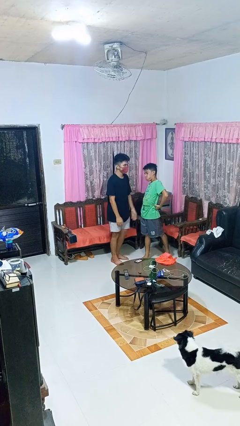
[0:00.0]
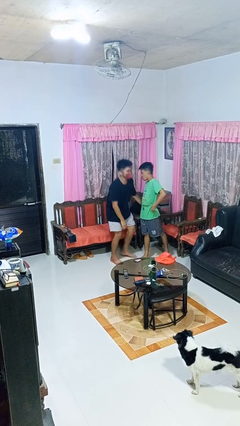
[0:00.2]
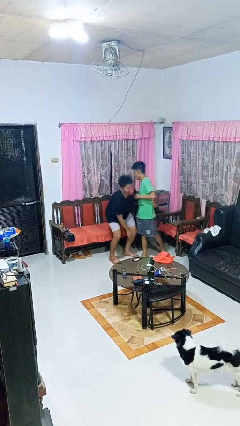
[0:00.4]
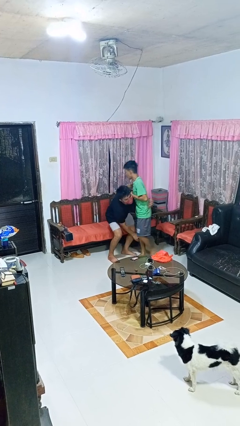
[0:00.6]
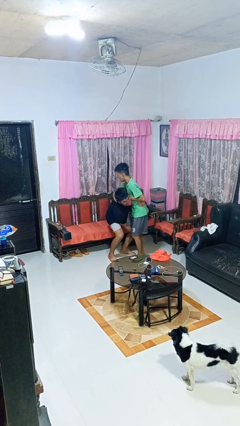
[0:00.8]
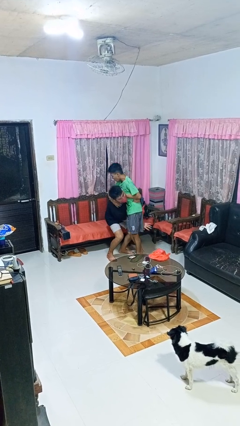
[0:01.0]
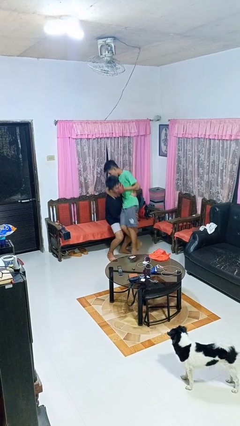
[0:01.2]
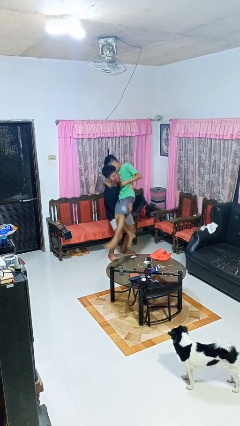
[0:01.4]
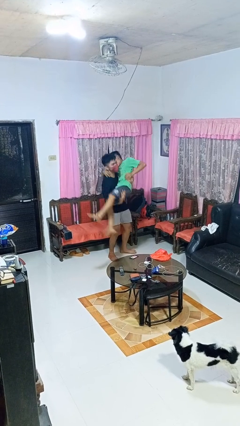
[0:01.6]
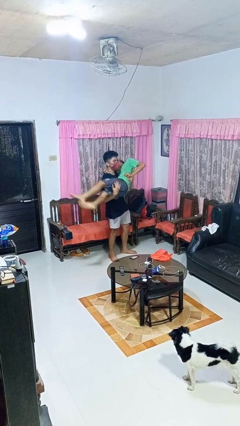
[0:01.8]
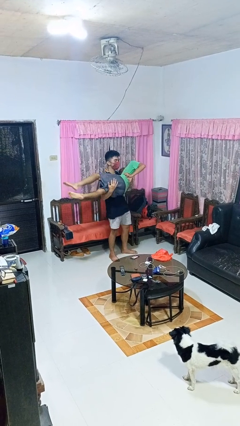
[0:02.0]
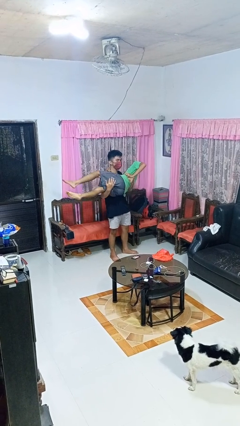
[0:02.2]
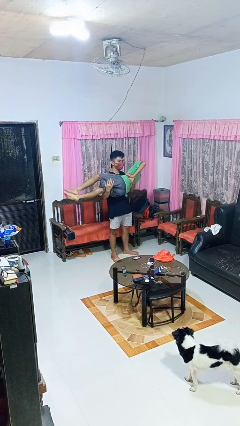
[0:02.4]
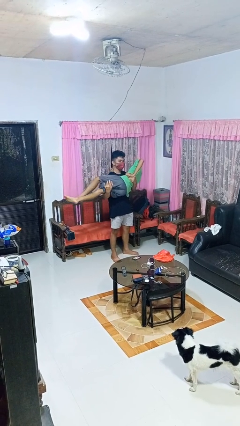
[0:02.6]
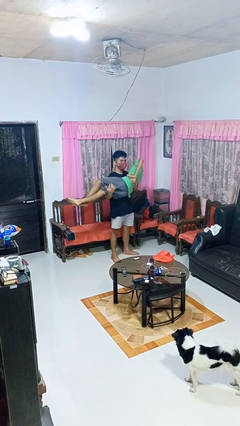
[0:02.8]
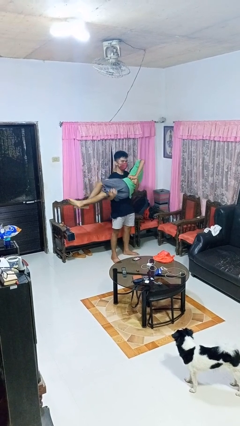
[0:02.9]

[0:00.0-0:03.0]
person picks up person

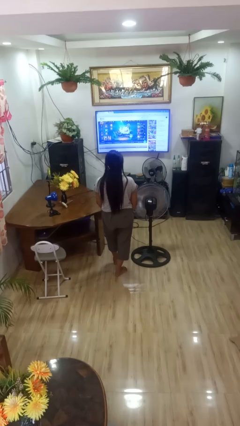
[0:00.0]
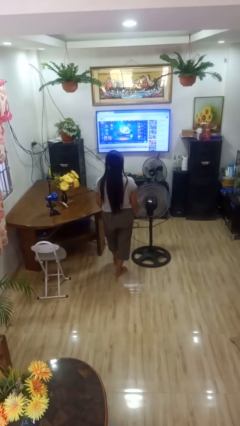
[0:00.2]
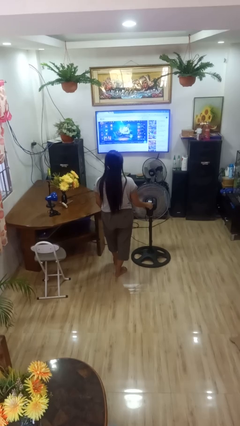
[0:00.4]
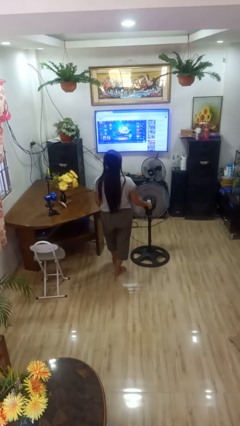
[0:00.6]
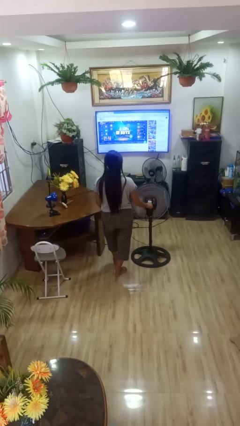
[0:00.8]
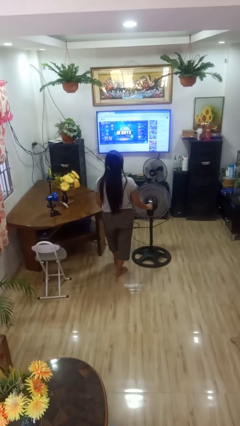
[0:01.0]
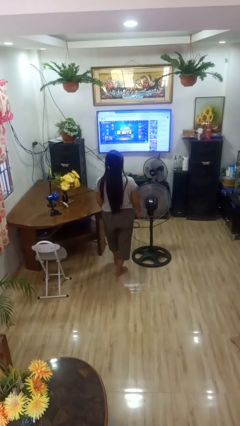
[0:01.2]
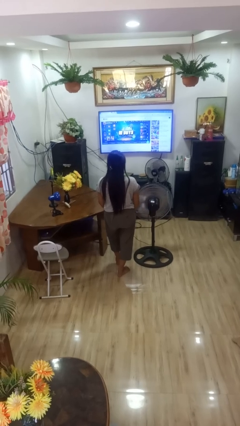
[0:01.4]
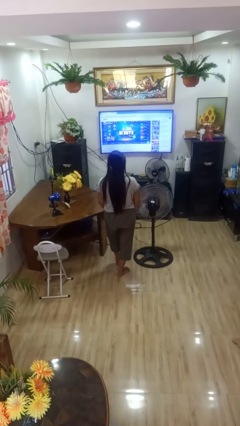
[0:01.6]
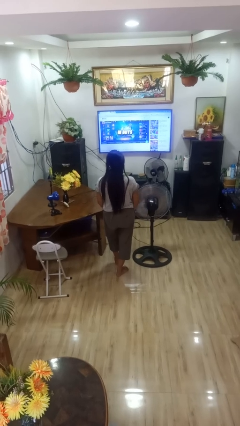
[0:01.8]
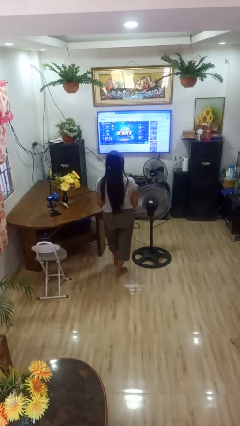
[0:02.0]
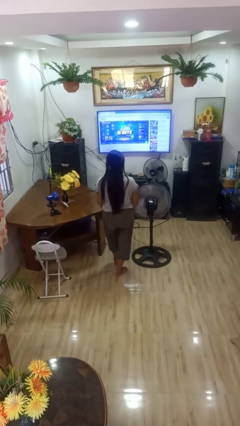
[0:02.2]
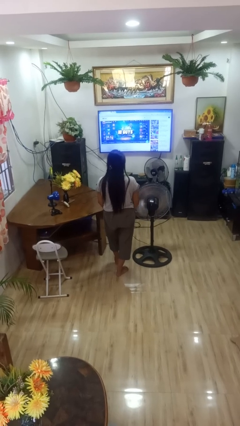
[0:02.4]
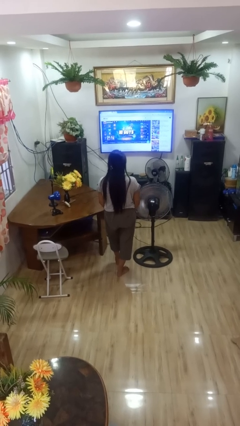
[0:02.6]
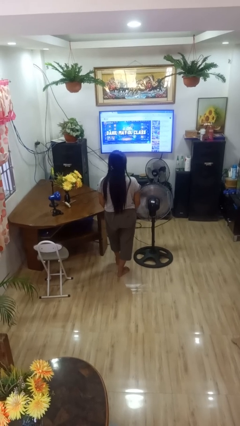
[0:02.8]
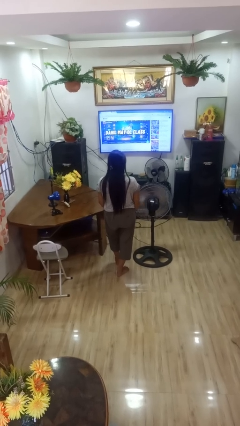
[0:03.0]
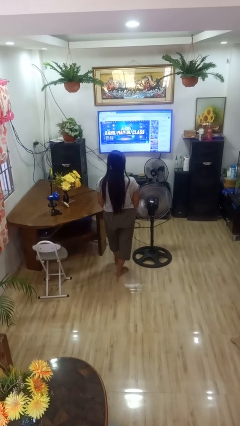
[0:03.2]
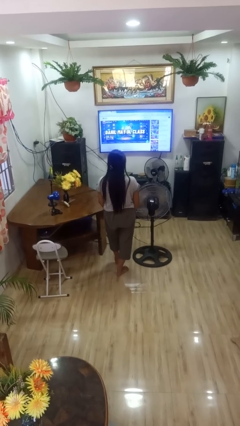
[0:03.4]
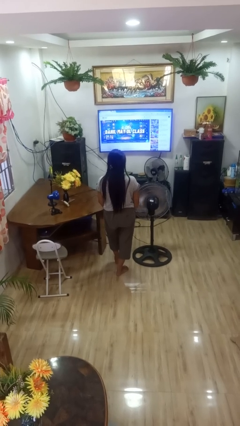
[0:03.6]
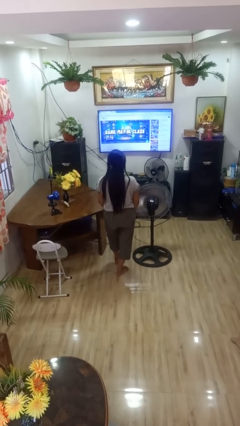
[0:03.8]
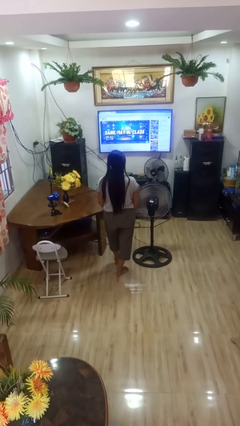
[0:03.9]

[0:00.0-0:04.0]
person turns off fan

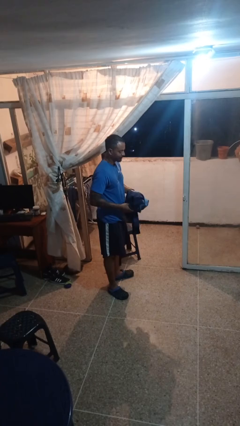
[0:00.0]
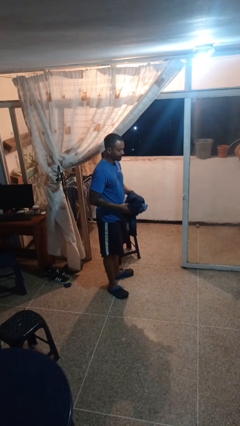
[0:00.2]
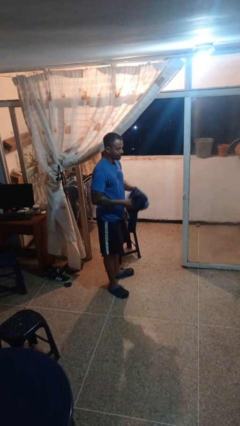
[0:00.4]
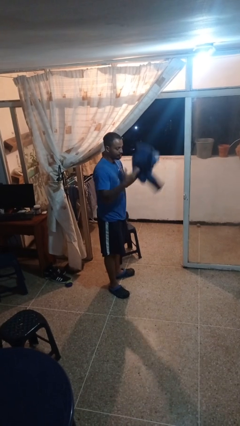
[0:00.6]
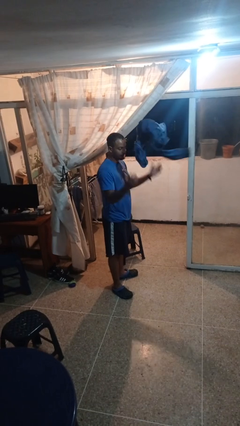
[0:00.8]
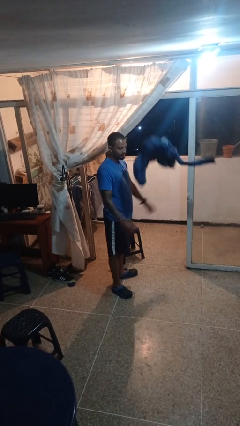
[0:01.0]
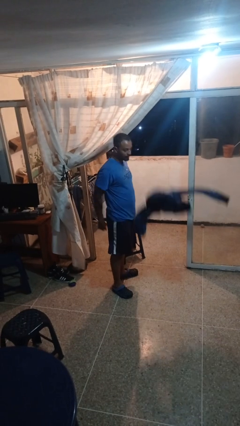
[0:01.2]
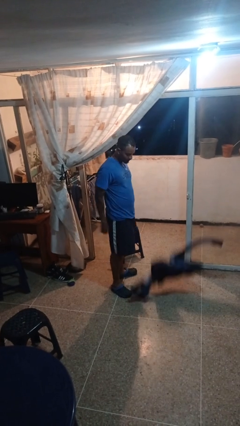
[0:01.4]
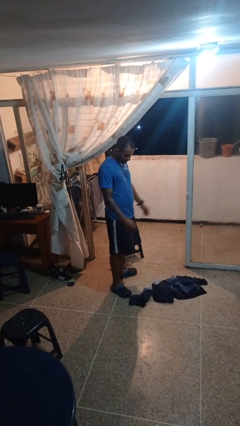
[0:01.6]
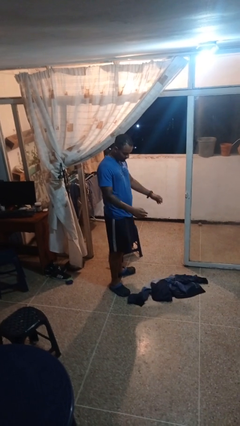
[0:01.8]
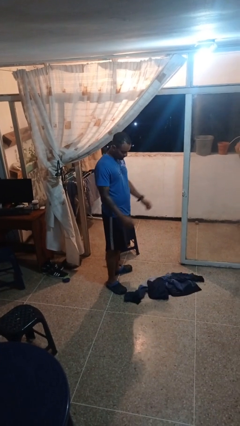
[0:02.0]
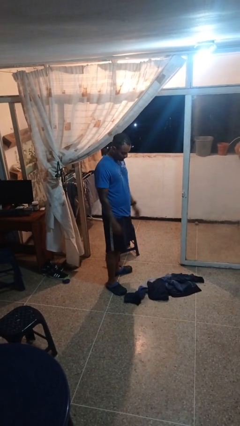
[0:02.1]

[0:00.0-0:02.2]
person throws object into air

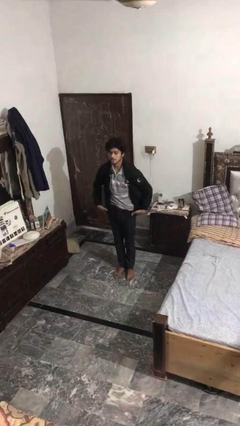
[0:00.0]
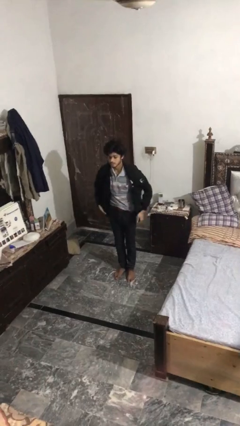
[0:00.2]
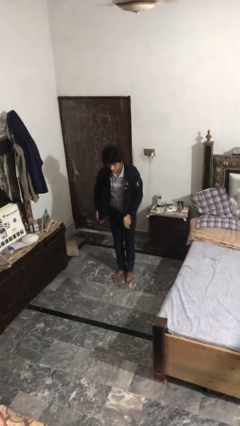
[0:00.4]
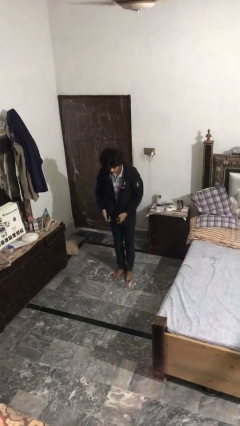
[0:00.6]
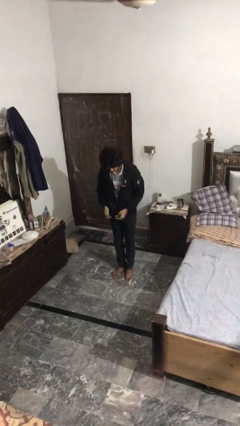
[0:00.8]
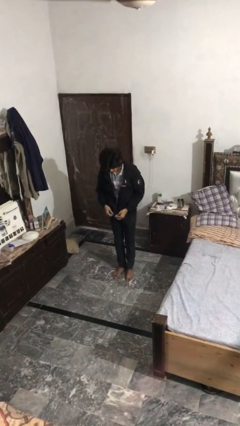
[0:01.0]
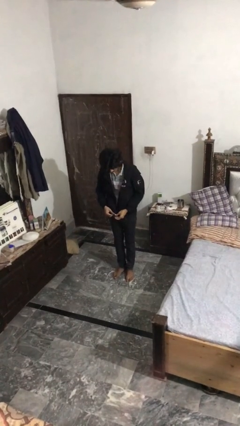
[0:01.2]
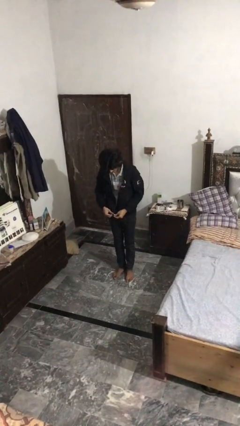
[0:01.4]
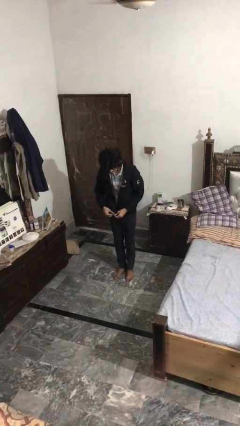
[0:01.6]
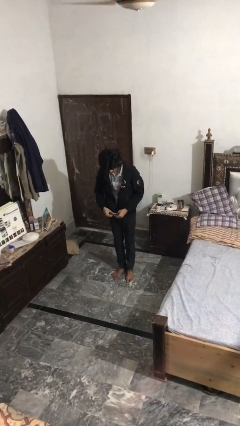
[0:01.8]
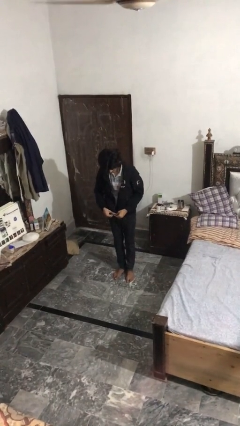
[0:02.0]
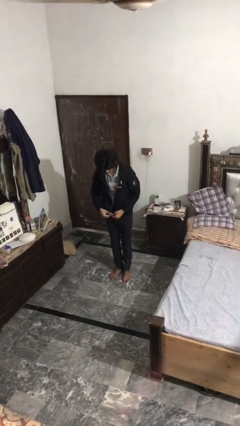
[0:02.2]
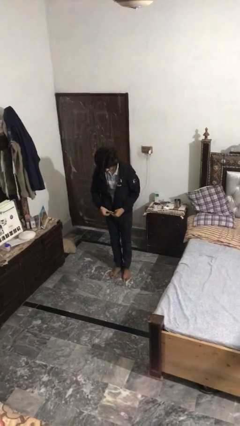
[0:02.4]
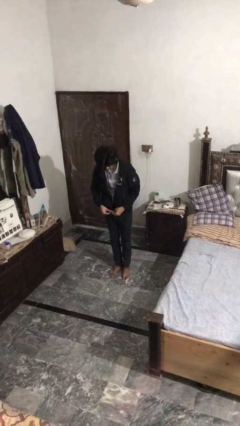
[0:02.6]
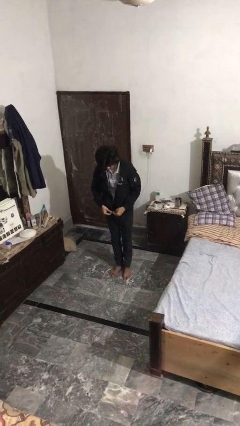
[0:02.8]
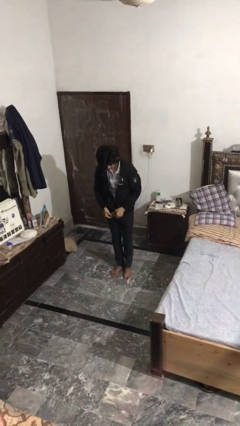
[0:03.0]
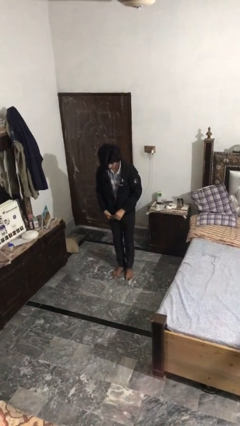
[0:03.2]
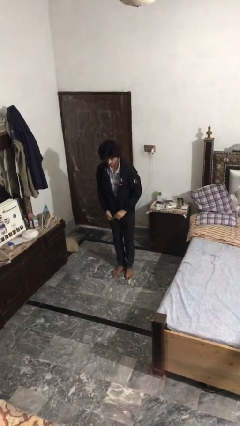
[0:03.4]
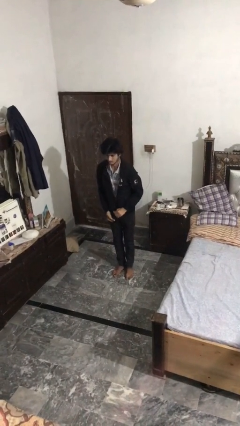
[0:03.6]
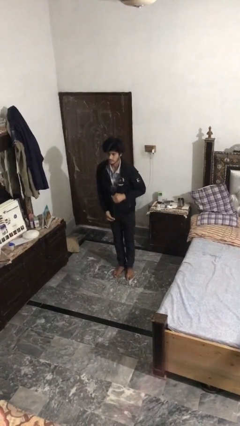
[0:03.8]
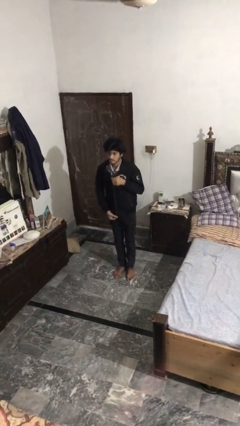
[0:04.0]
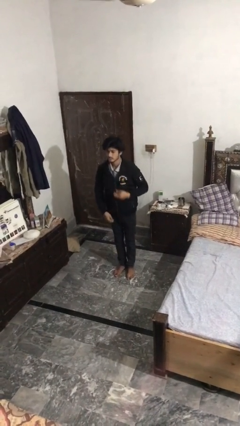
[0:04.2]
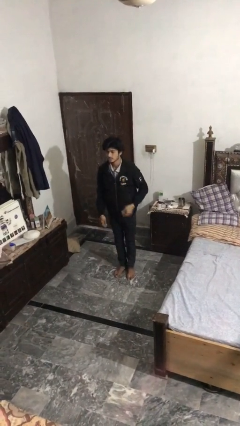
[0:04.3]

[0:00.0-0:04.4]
person zips up jacket

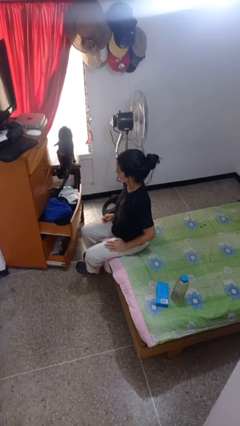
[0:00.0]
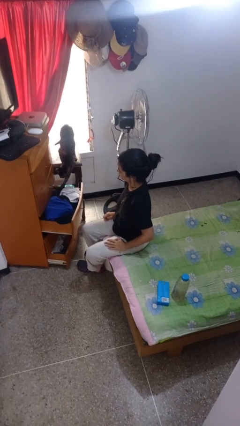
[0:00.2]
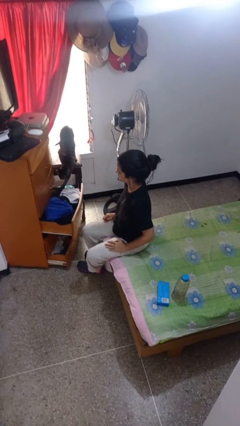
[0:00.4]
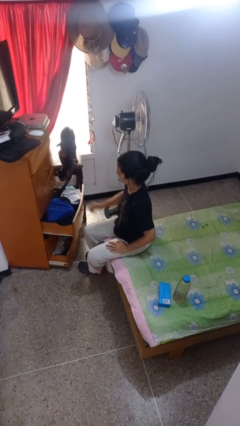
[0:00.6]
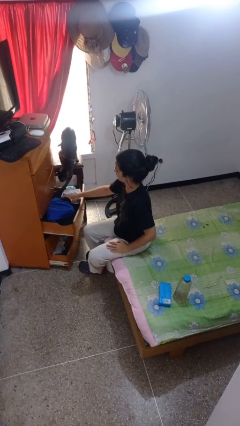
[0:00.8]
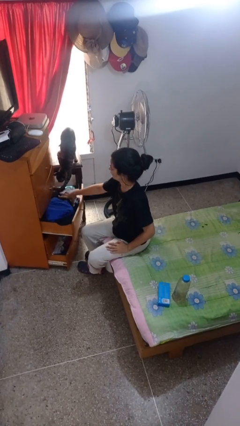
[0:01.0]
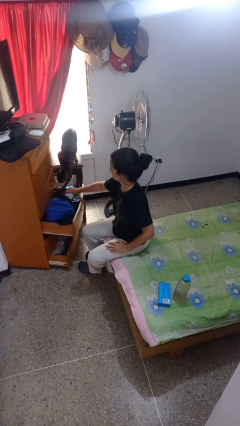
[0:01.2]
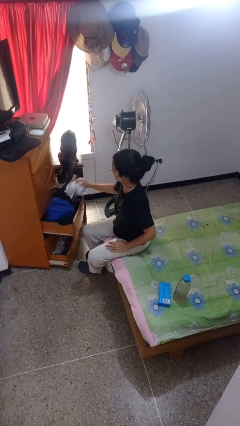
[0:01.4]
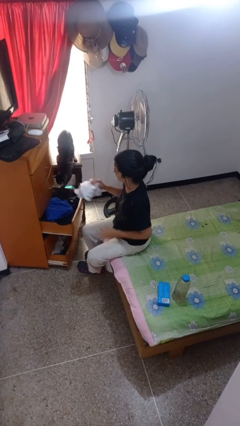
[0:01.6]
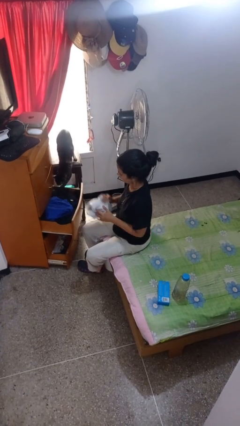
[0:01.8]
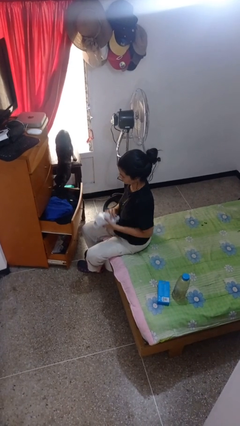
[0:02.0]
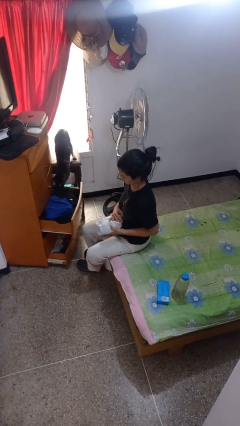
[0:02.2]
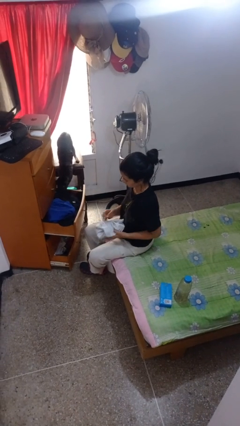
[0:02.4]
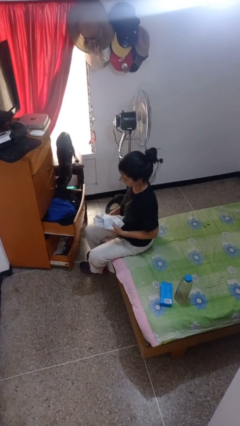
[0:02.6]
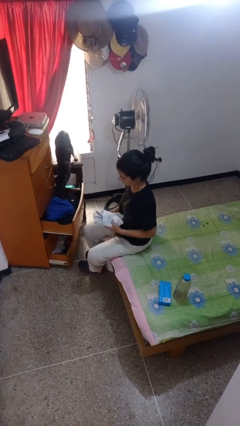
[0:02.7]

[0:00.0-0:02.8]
person takes clothes from dresser

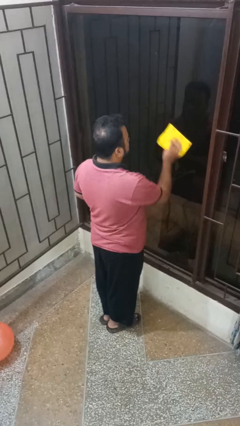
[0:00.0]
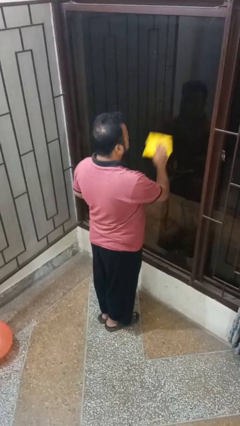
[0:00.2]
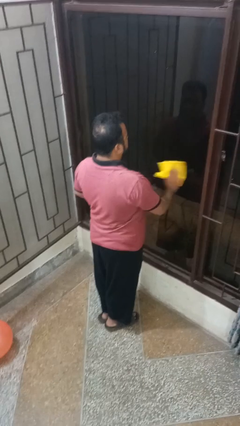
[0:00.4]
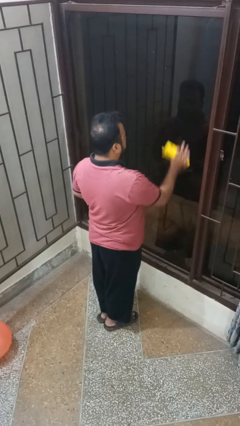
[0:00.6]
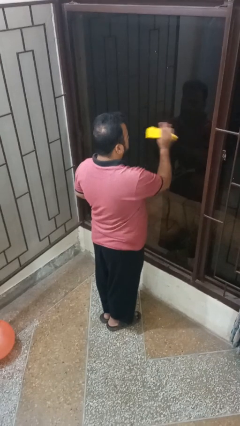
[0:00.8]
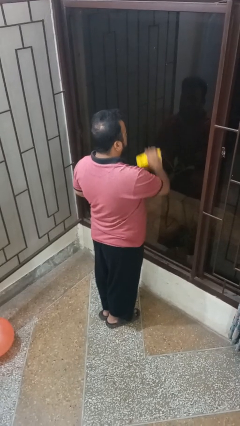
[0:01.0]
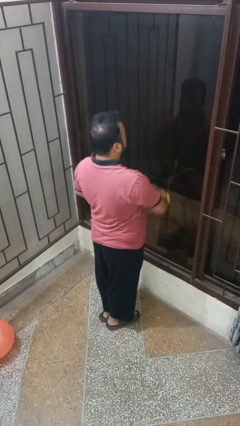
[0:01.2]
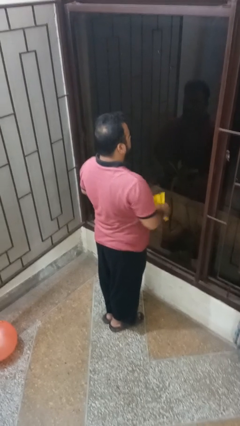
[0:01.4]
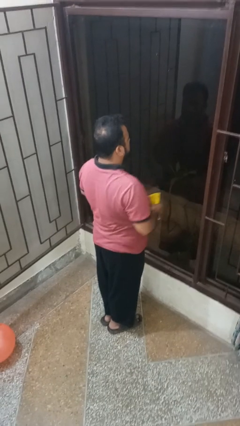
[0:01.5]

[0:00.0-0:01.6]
person washes window
